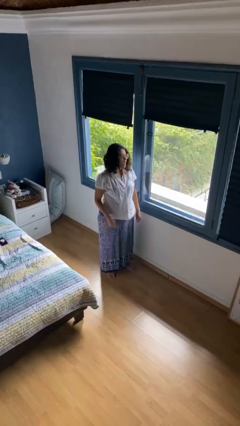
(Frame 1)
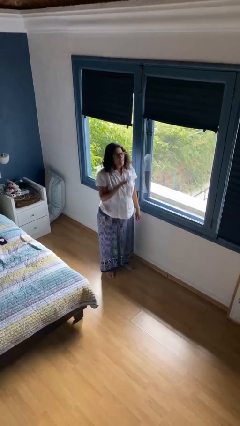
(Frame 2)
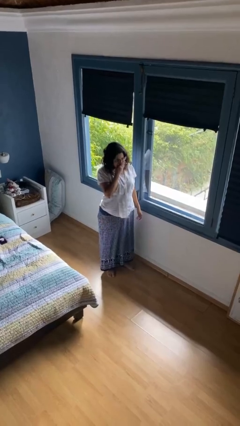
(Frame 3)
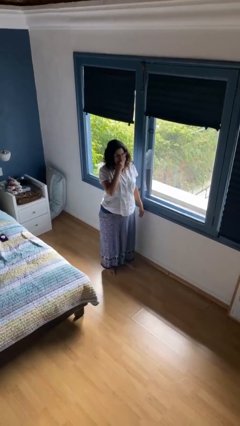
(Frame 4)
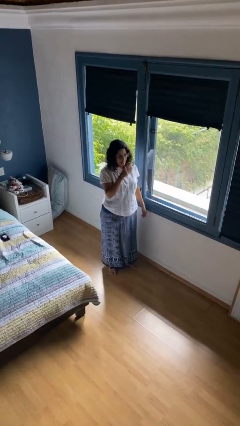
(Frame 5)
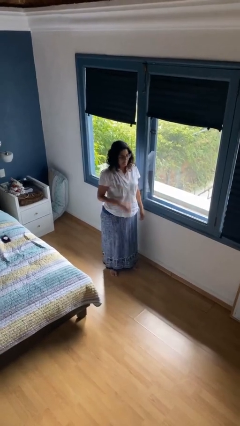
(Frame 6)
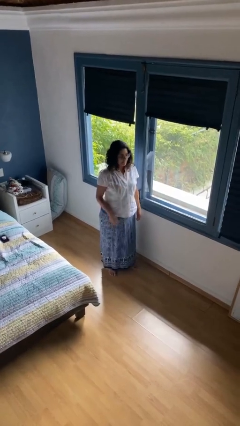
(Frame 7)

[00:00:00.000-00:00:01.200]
person sneezes into hand

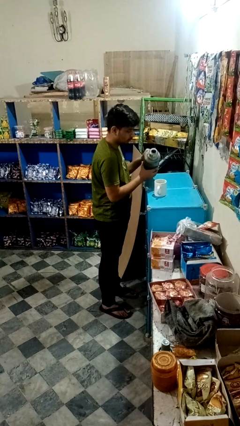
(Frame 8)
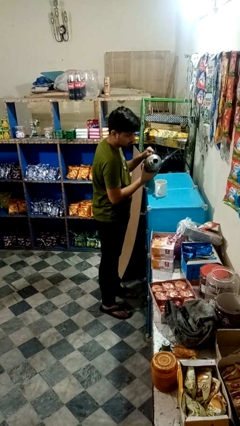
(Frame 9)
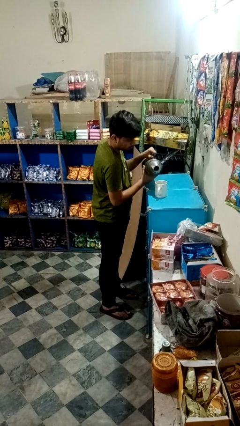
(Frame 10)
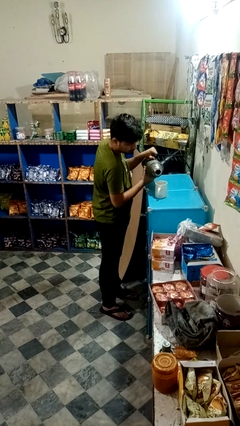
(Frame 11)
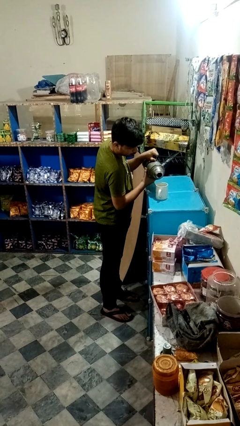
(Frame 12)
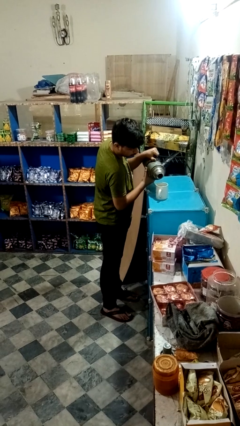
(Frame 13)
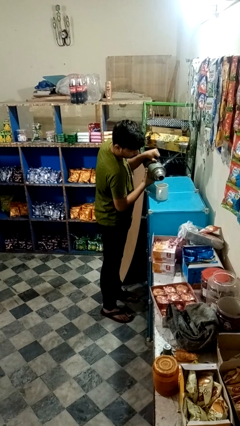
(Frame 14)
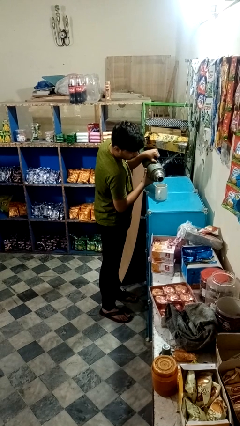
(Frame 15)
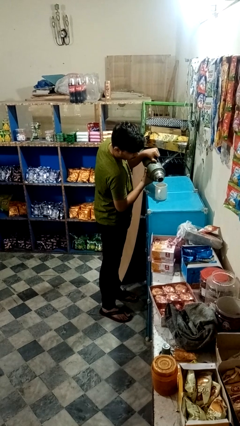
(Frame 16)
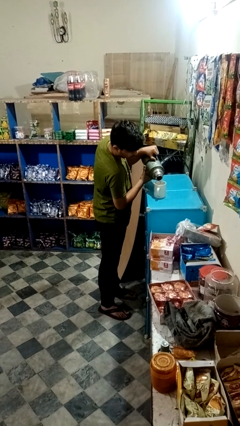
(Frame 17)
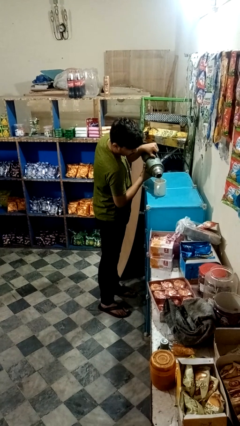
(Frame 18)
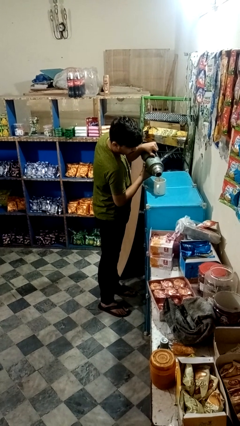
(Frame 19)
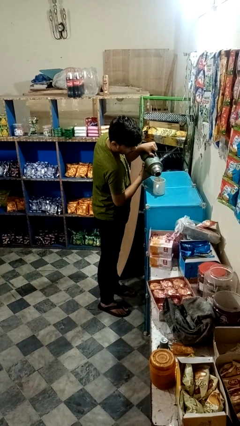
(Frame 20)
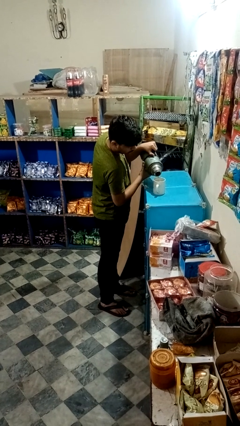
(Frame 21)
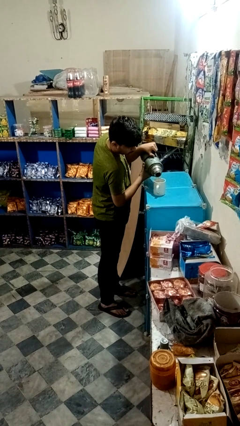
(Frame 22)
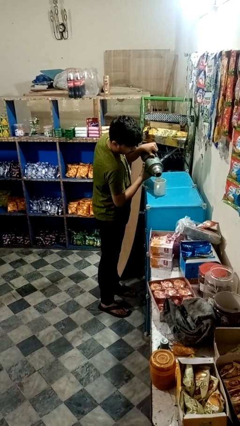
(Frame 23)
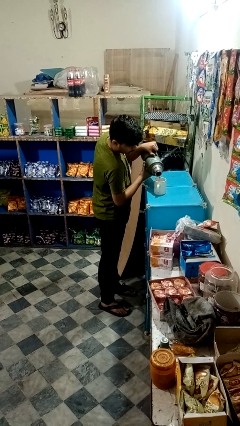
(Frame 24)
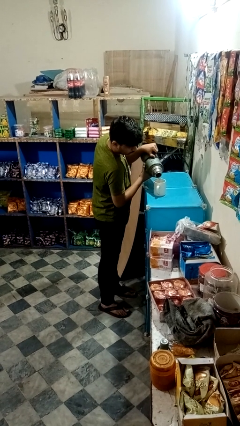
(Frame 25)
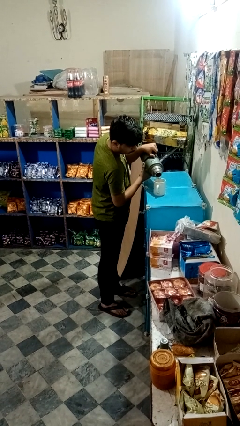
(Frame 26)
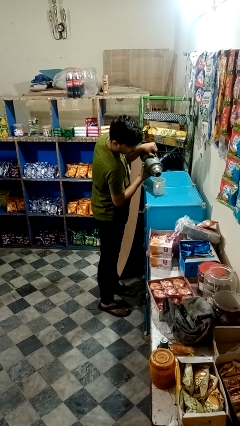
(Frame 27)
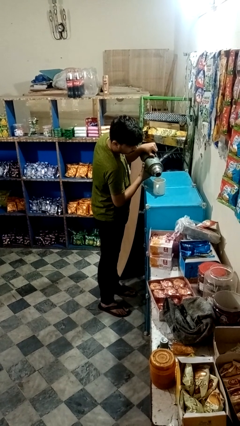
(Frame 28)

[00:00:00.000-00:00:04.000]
person pours coffee into mug

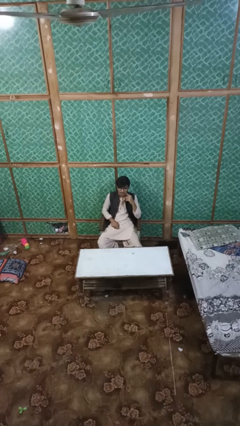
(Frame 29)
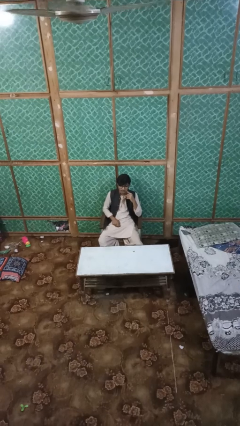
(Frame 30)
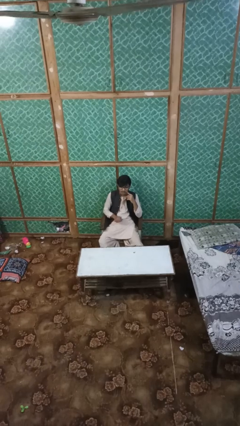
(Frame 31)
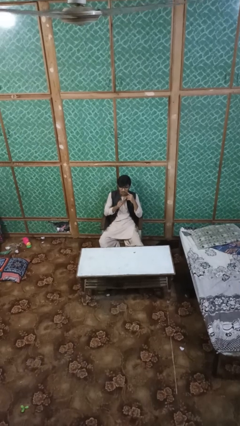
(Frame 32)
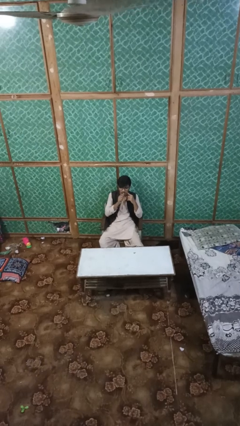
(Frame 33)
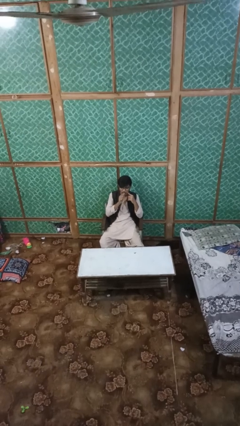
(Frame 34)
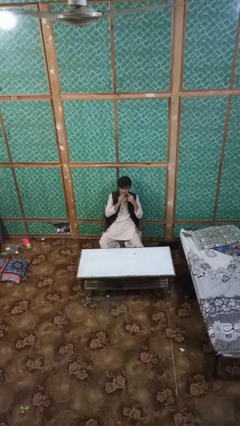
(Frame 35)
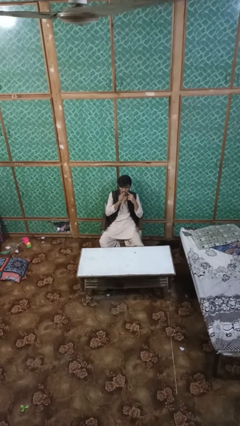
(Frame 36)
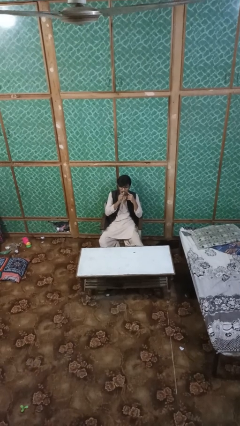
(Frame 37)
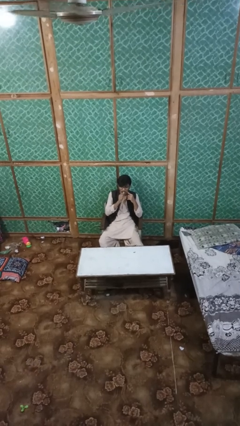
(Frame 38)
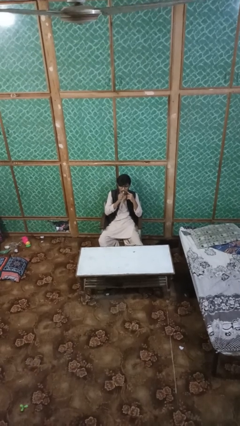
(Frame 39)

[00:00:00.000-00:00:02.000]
person vapes

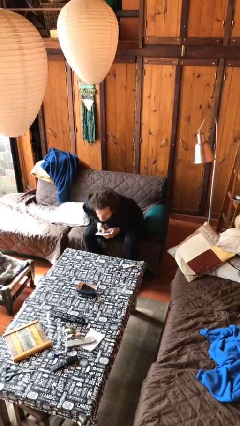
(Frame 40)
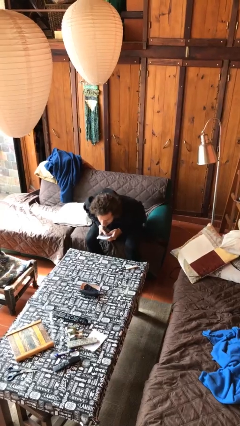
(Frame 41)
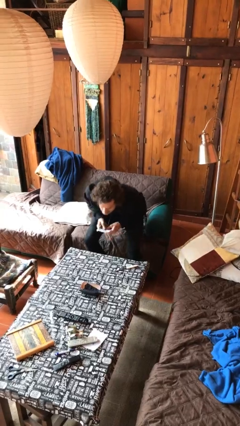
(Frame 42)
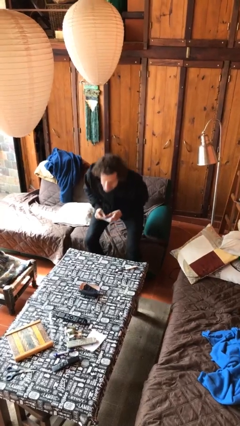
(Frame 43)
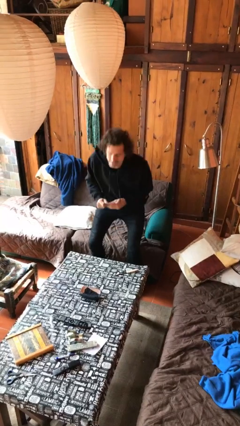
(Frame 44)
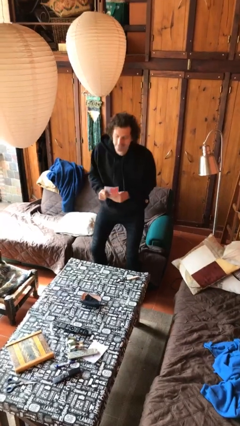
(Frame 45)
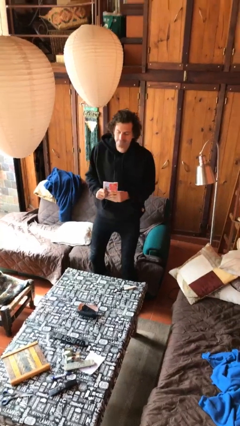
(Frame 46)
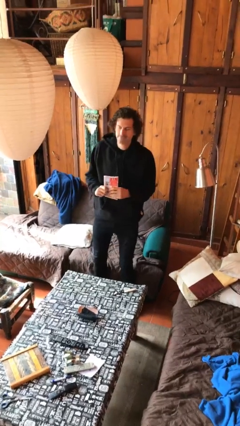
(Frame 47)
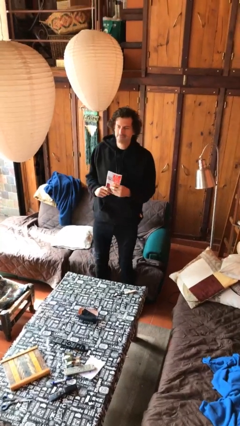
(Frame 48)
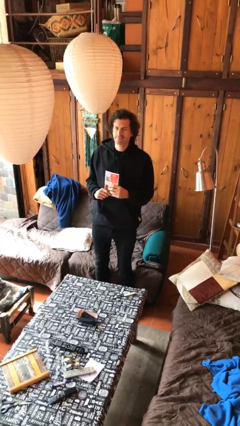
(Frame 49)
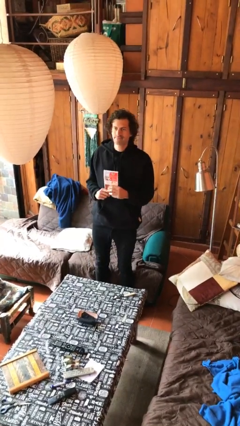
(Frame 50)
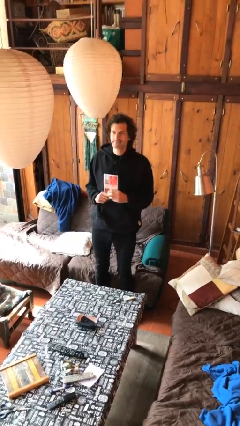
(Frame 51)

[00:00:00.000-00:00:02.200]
person stands up

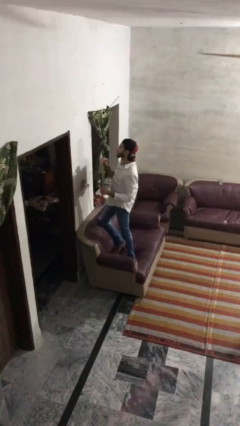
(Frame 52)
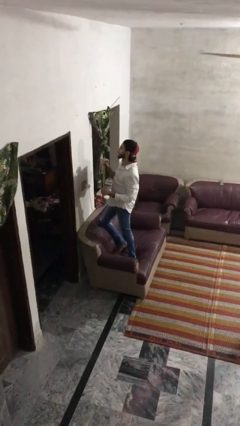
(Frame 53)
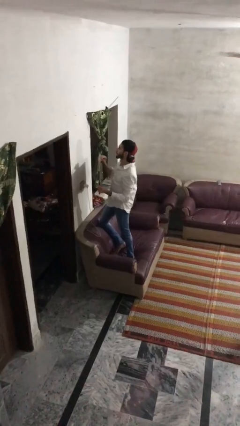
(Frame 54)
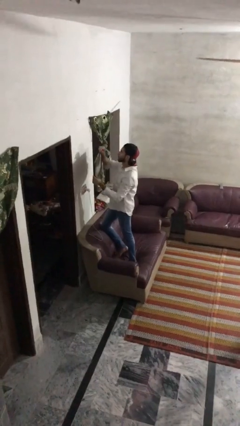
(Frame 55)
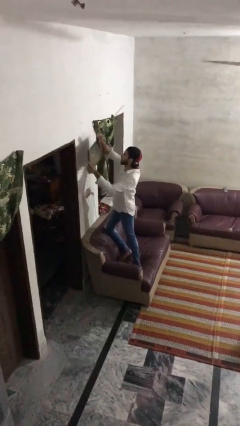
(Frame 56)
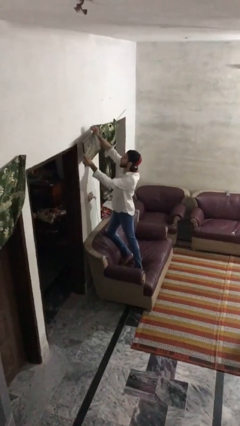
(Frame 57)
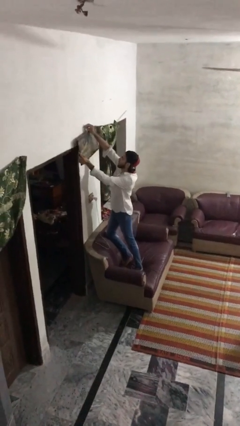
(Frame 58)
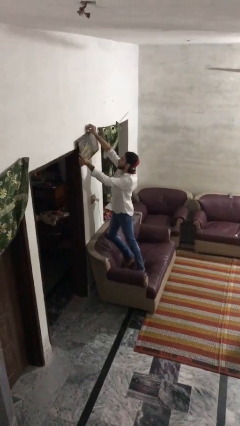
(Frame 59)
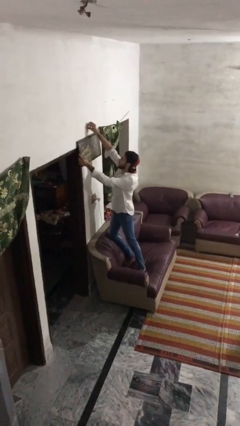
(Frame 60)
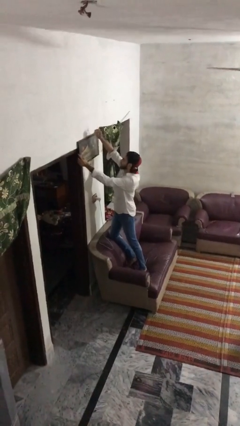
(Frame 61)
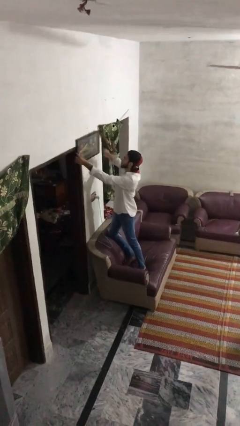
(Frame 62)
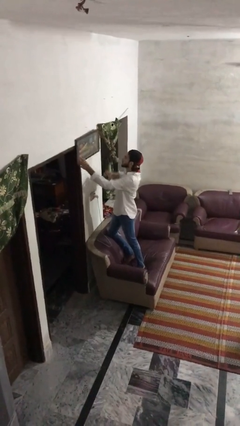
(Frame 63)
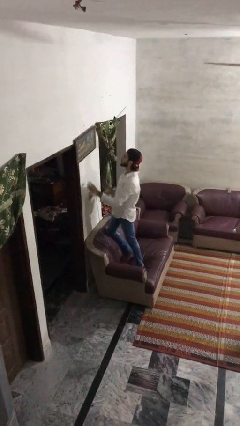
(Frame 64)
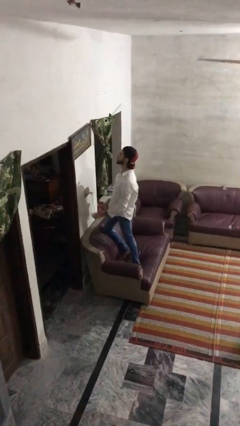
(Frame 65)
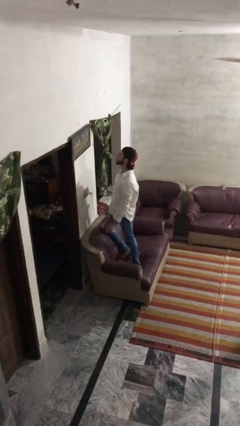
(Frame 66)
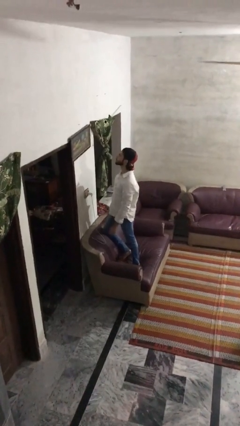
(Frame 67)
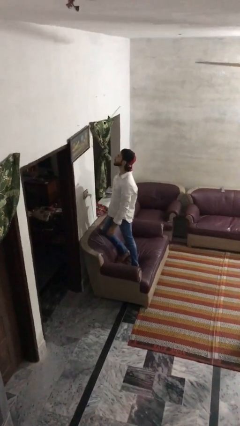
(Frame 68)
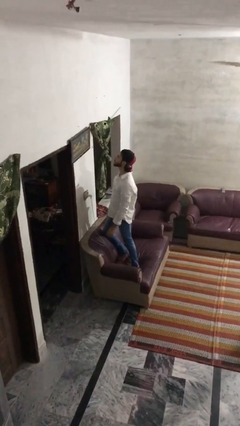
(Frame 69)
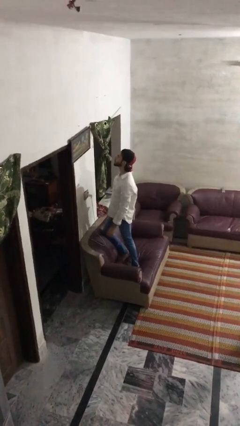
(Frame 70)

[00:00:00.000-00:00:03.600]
person puts up picture frame

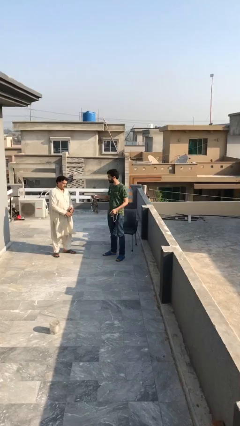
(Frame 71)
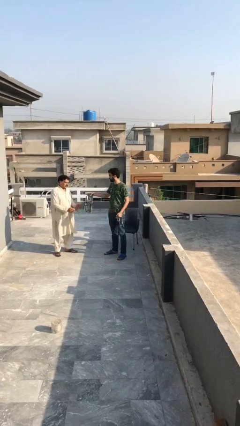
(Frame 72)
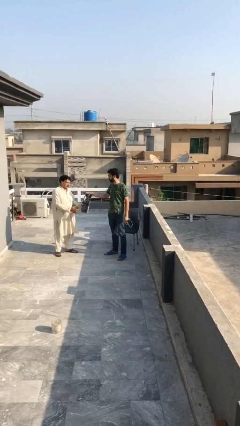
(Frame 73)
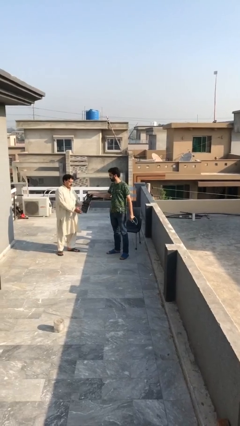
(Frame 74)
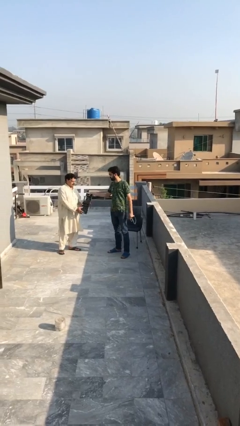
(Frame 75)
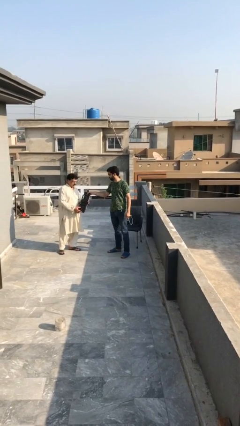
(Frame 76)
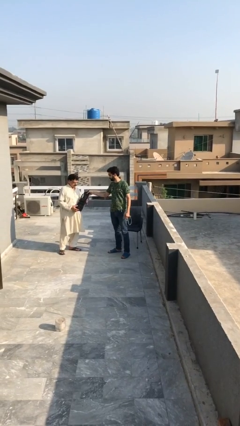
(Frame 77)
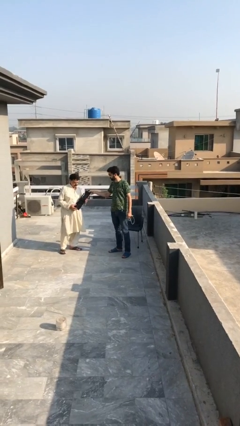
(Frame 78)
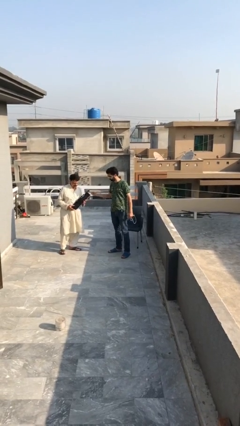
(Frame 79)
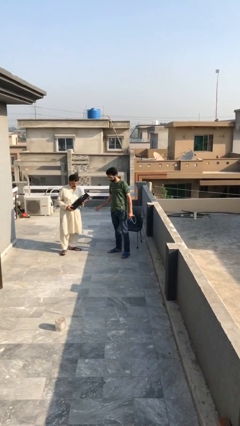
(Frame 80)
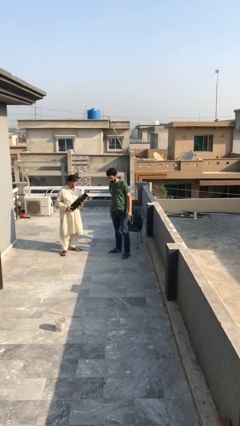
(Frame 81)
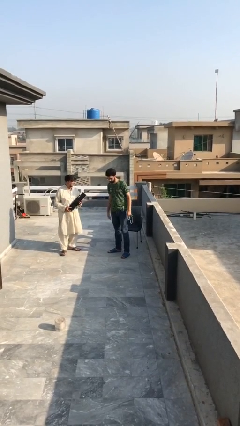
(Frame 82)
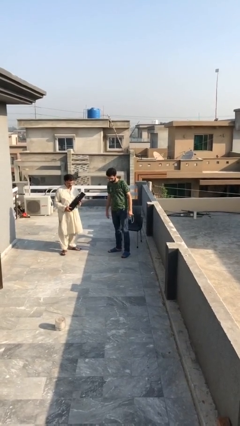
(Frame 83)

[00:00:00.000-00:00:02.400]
person transfers object to person

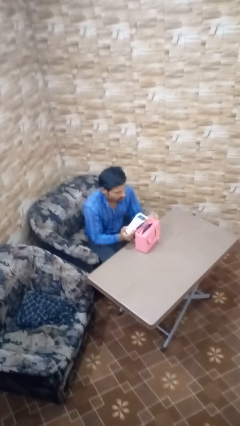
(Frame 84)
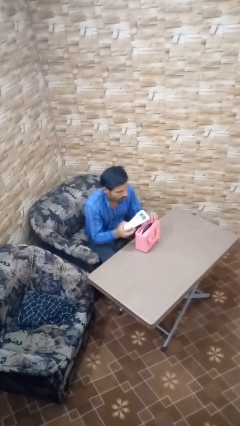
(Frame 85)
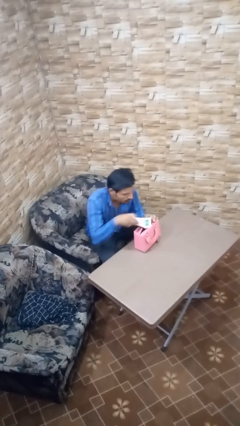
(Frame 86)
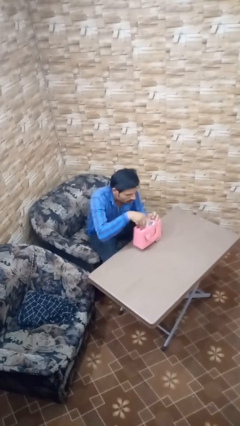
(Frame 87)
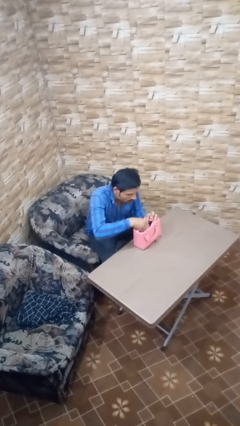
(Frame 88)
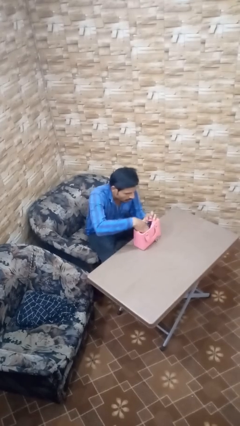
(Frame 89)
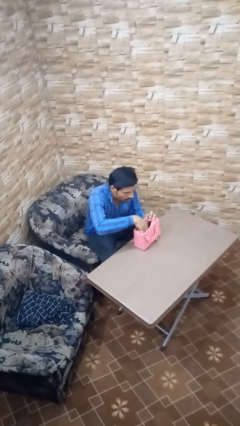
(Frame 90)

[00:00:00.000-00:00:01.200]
person puts object into purse
